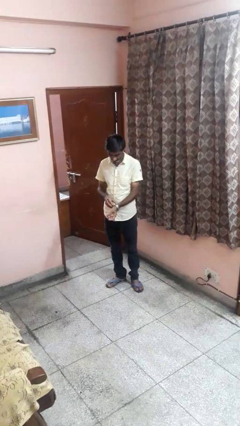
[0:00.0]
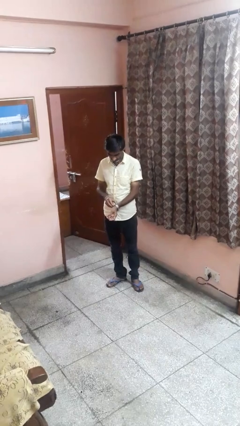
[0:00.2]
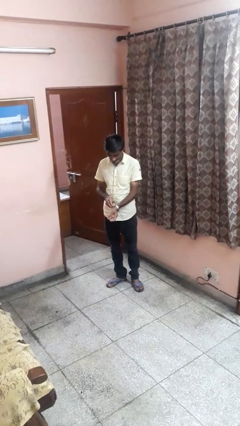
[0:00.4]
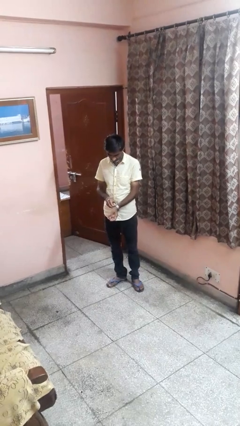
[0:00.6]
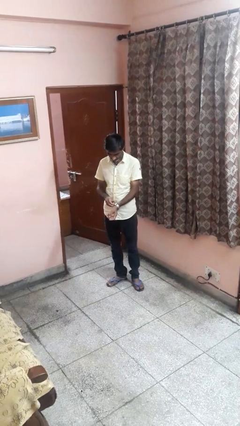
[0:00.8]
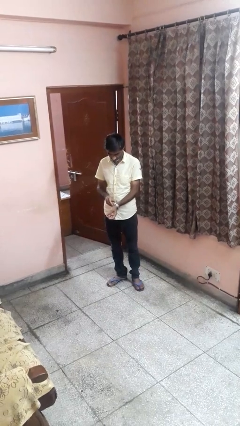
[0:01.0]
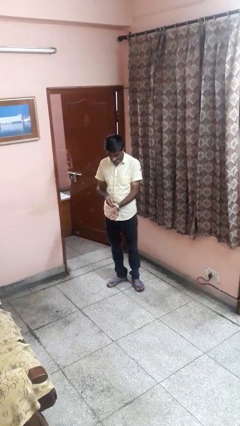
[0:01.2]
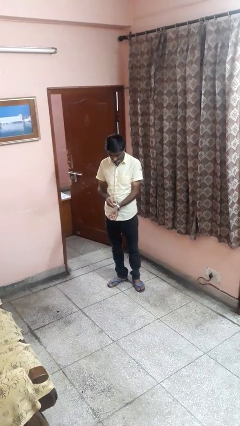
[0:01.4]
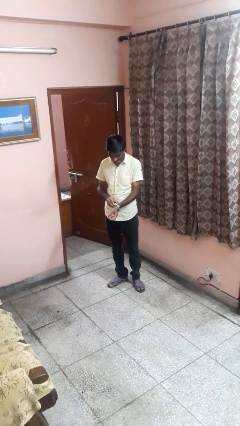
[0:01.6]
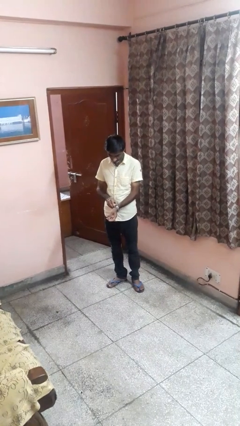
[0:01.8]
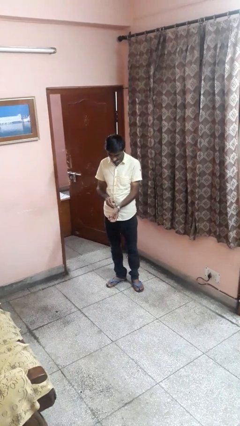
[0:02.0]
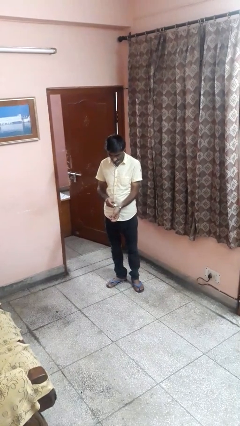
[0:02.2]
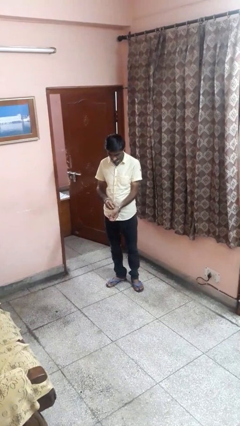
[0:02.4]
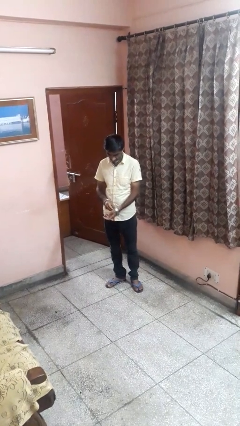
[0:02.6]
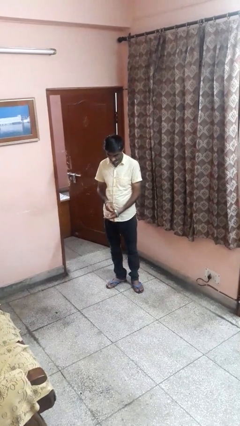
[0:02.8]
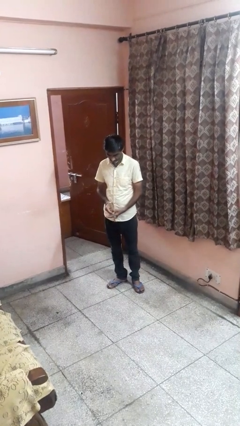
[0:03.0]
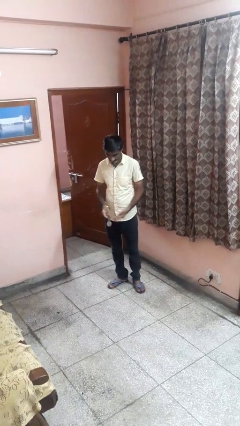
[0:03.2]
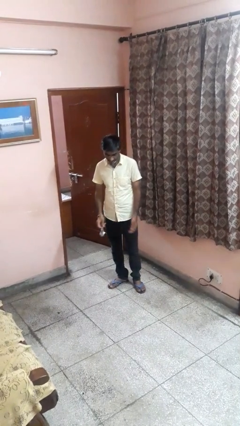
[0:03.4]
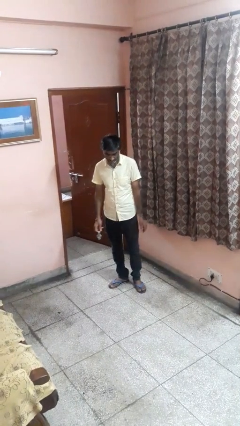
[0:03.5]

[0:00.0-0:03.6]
person takes off wristwatch

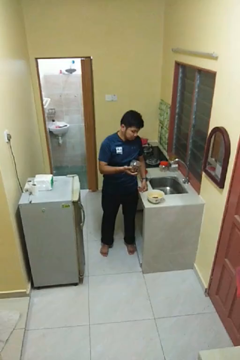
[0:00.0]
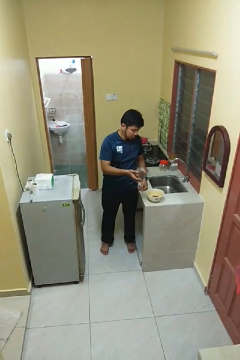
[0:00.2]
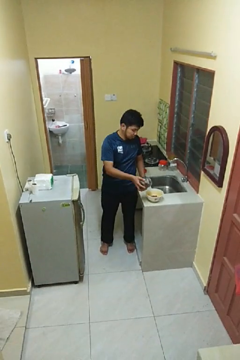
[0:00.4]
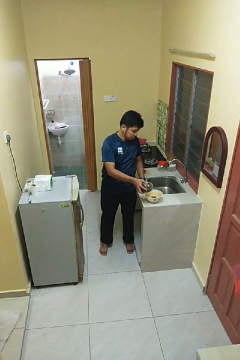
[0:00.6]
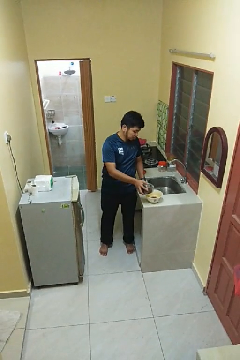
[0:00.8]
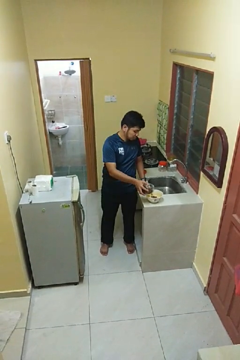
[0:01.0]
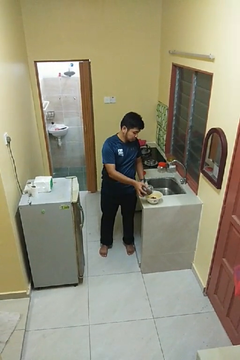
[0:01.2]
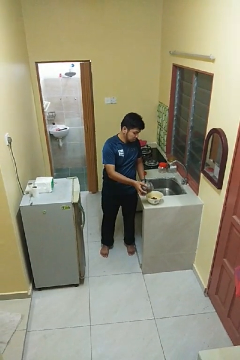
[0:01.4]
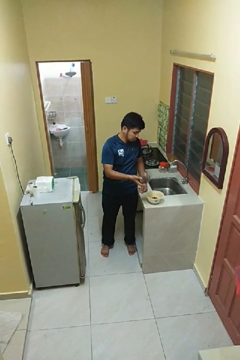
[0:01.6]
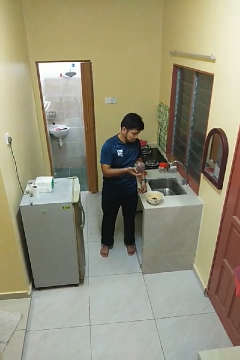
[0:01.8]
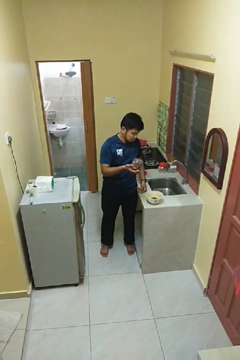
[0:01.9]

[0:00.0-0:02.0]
person pours into bowl

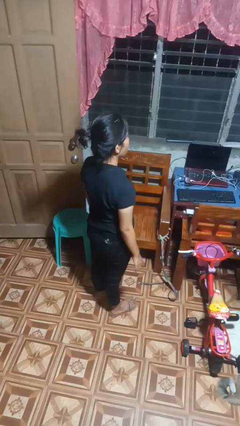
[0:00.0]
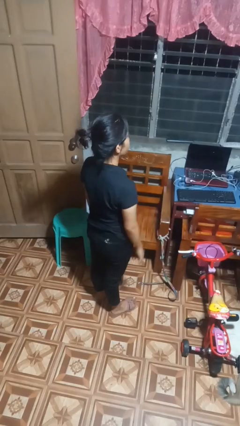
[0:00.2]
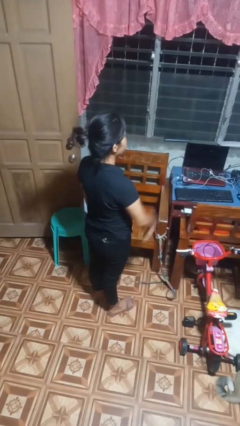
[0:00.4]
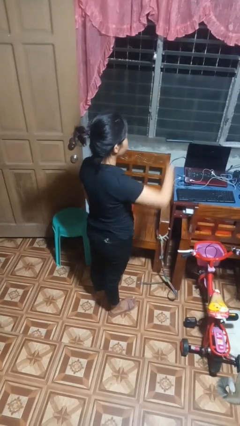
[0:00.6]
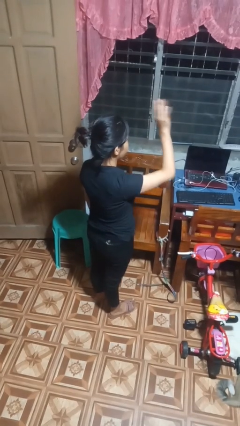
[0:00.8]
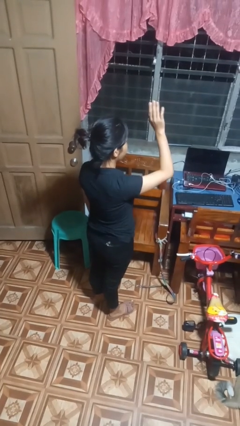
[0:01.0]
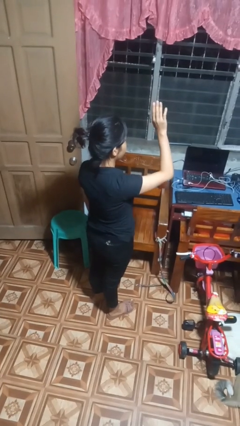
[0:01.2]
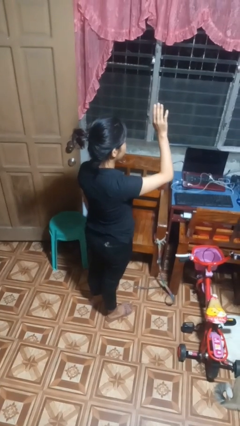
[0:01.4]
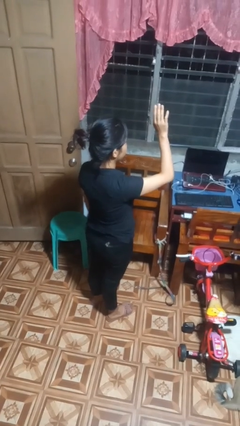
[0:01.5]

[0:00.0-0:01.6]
person gestures swipe up

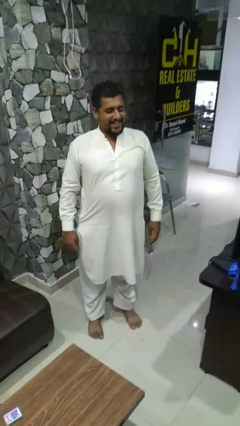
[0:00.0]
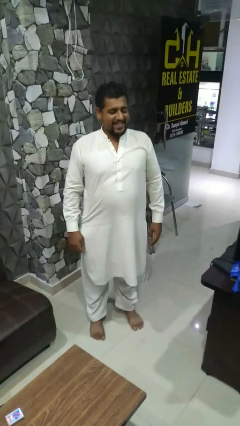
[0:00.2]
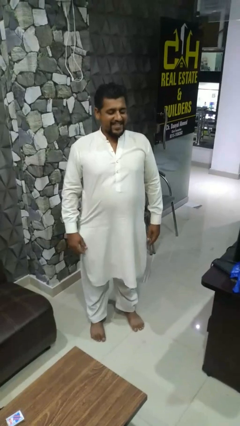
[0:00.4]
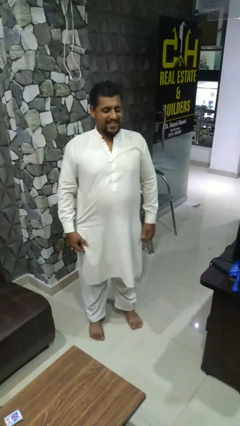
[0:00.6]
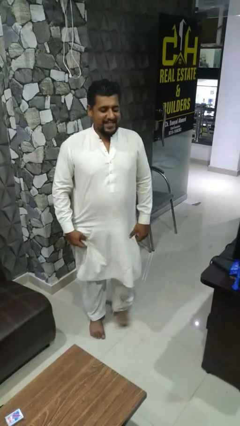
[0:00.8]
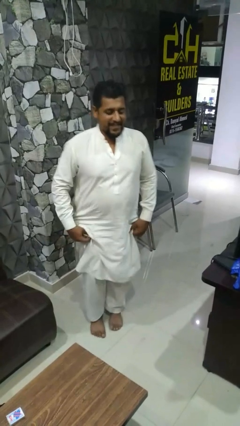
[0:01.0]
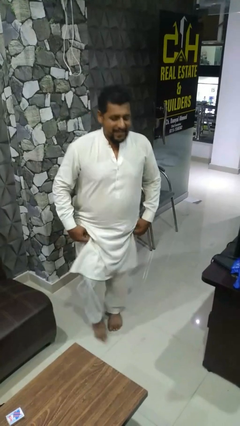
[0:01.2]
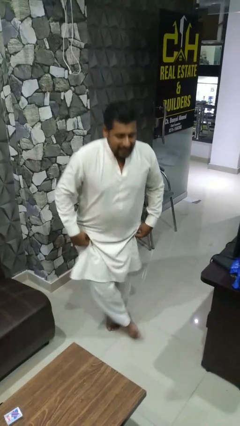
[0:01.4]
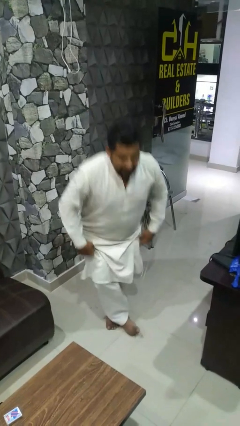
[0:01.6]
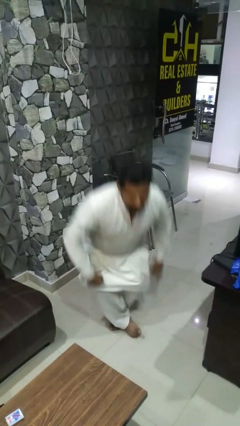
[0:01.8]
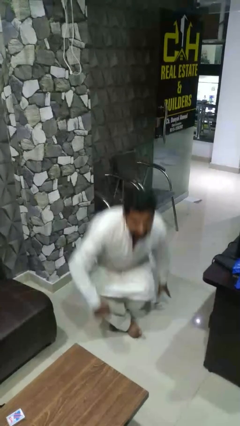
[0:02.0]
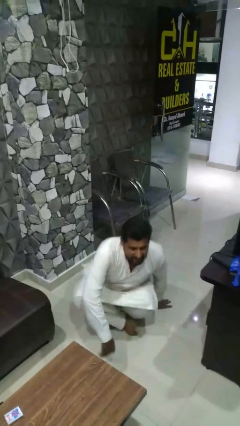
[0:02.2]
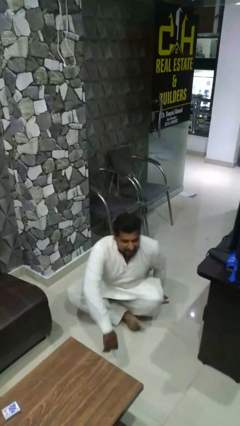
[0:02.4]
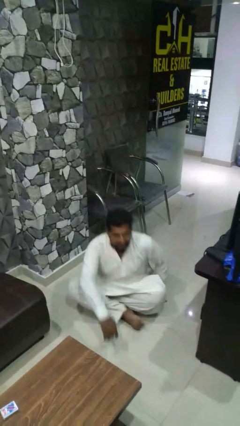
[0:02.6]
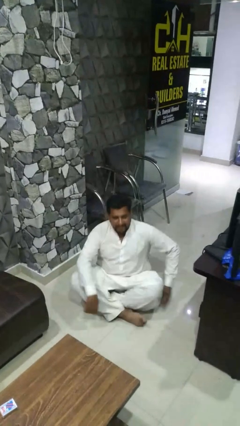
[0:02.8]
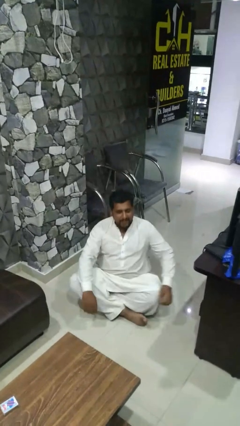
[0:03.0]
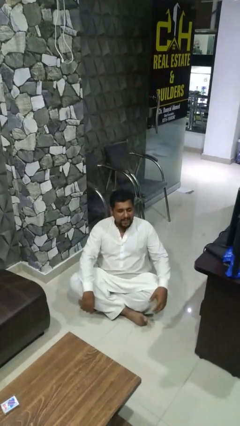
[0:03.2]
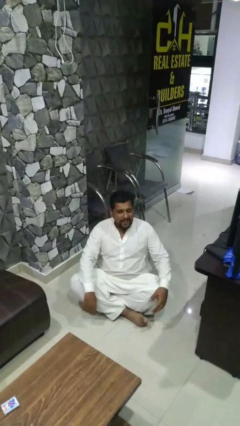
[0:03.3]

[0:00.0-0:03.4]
person sits crisscross

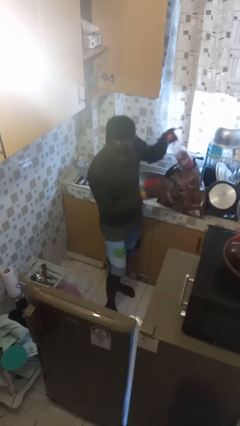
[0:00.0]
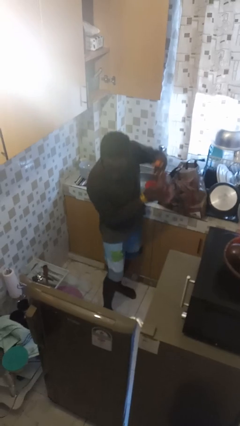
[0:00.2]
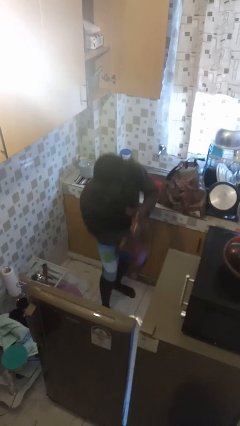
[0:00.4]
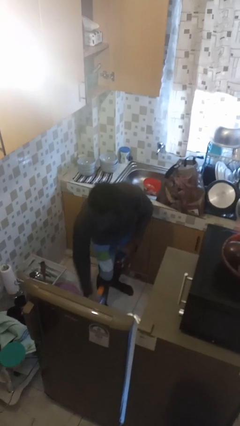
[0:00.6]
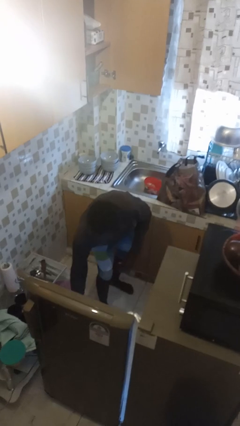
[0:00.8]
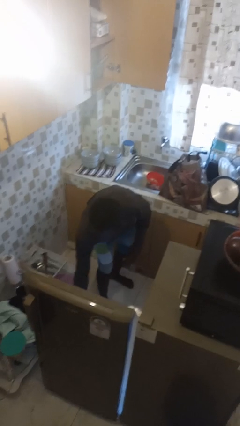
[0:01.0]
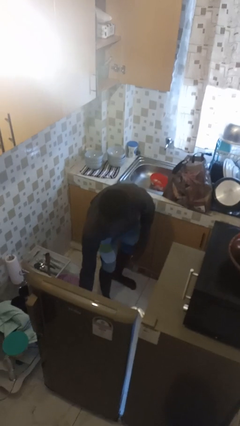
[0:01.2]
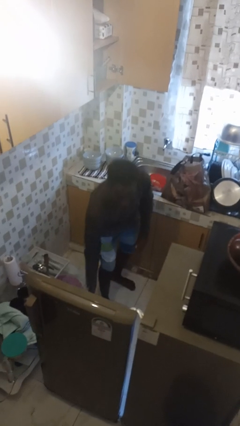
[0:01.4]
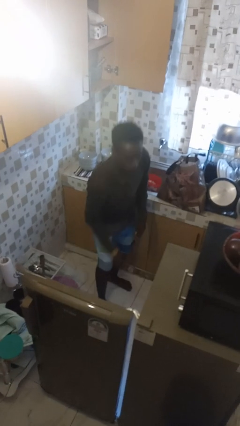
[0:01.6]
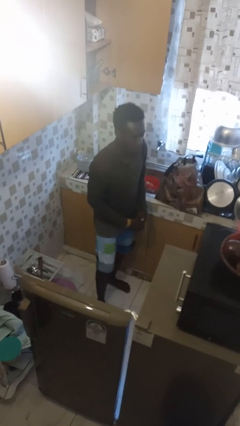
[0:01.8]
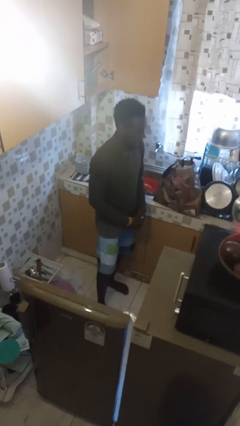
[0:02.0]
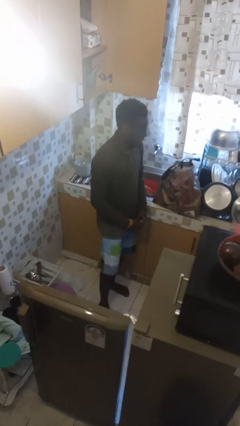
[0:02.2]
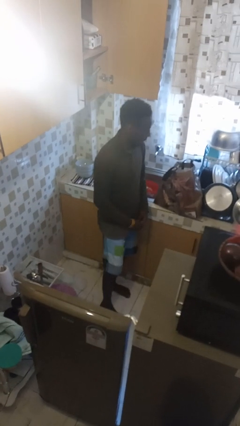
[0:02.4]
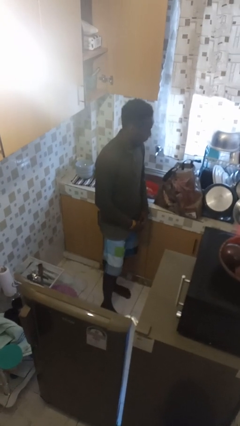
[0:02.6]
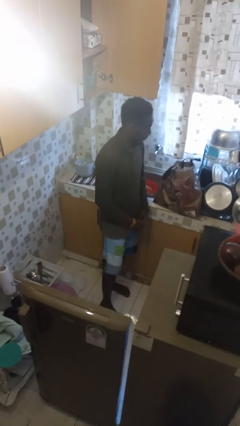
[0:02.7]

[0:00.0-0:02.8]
person loads groceries into refrigerator

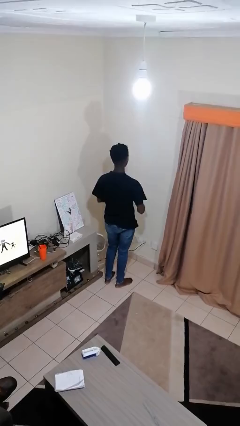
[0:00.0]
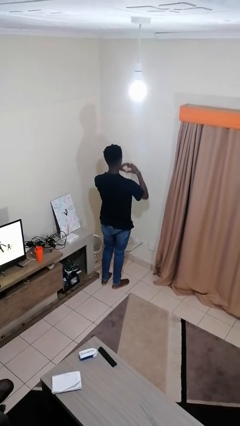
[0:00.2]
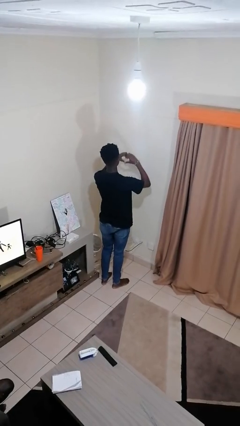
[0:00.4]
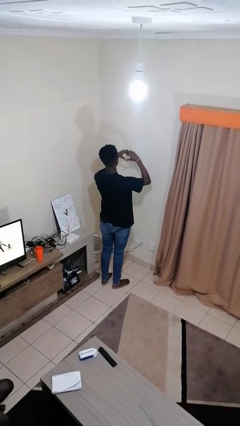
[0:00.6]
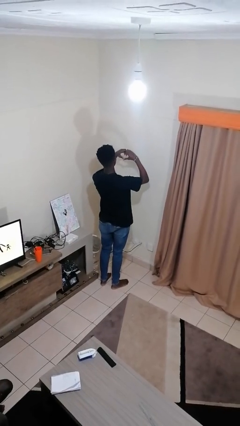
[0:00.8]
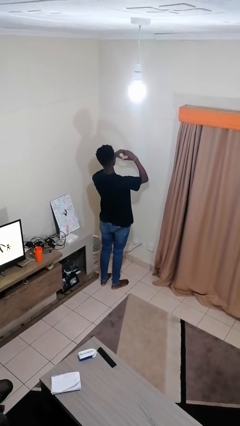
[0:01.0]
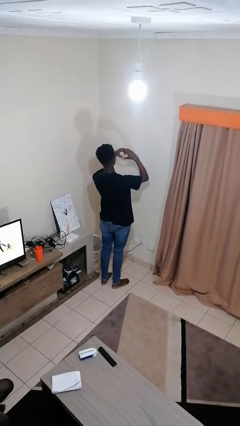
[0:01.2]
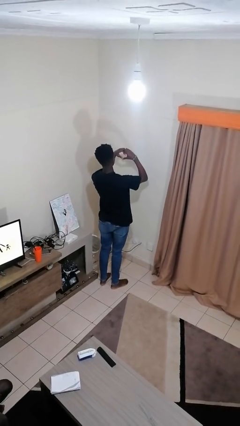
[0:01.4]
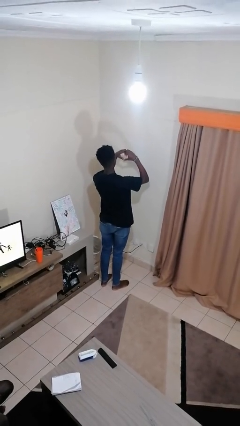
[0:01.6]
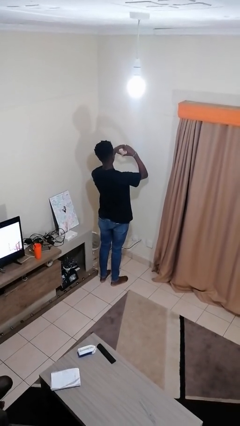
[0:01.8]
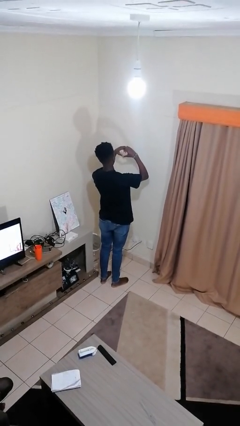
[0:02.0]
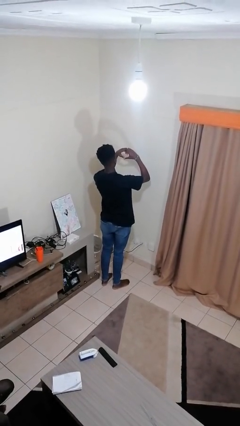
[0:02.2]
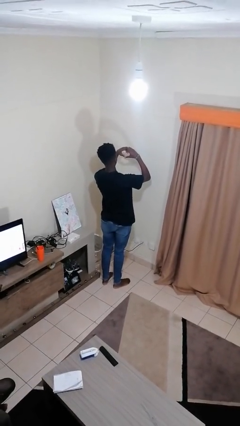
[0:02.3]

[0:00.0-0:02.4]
person gestures heart

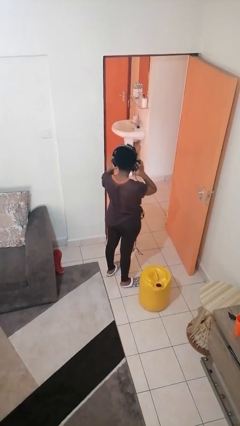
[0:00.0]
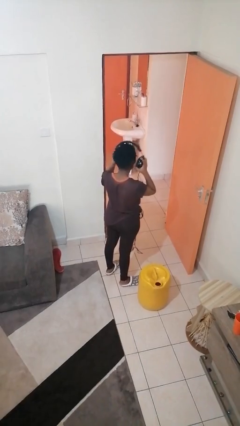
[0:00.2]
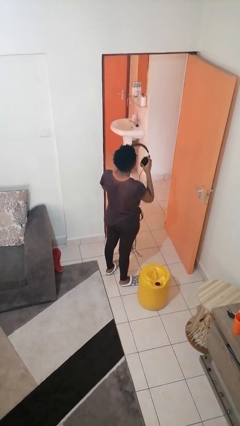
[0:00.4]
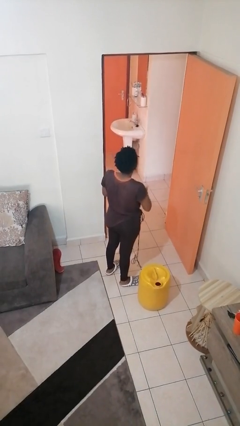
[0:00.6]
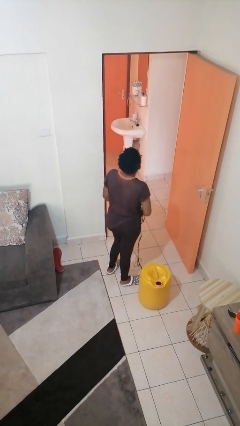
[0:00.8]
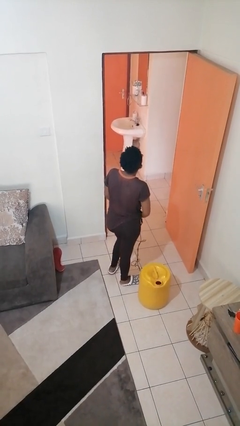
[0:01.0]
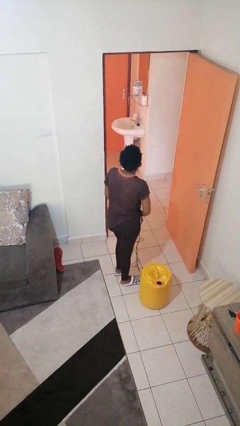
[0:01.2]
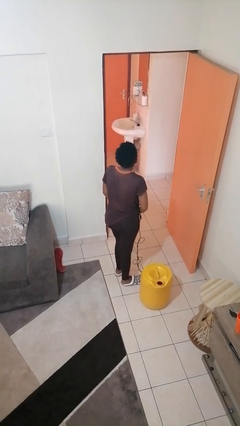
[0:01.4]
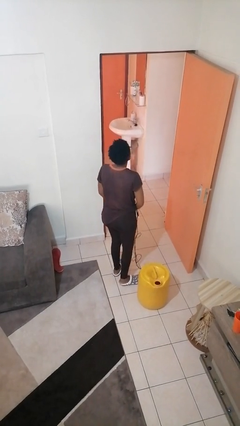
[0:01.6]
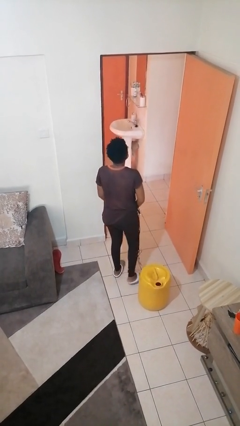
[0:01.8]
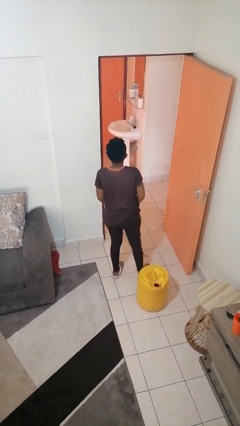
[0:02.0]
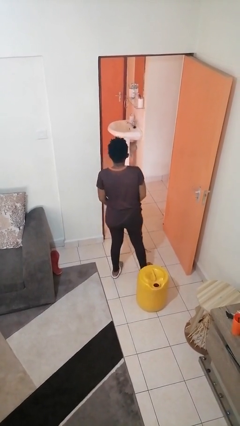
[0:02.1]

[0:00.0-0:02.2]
person takes off headphones
